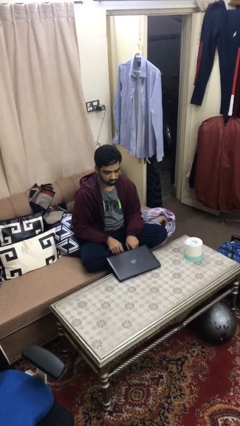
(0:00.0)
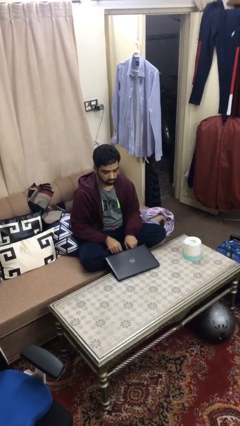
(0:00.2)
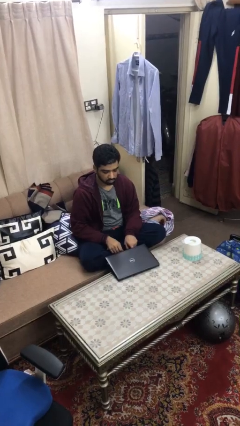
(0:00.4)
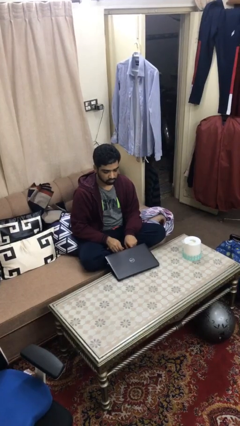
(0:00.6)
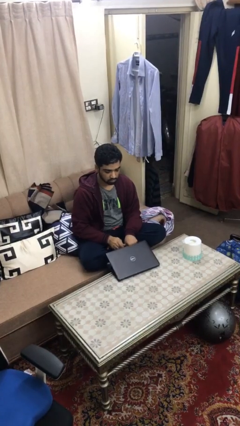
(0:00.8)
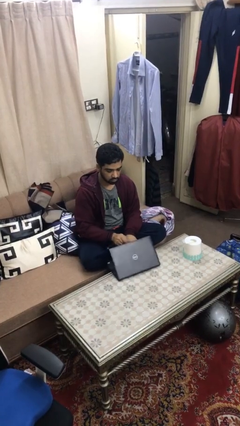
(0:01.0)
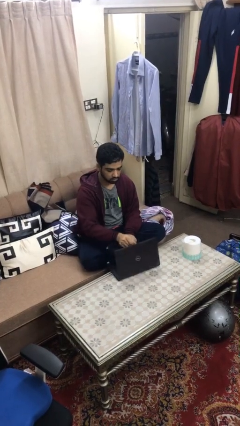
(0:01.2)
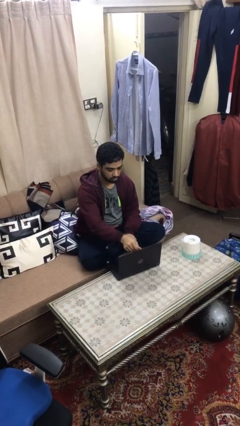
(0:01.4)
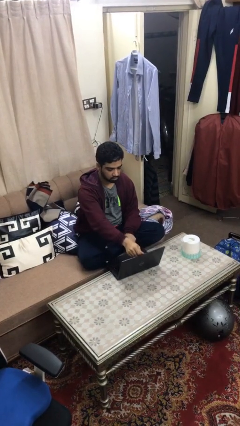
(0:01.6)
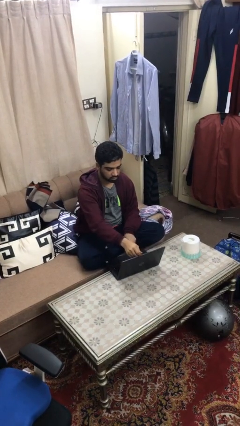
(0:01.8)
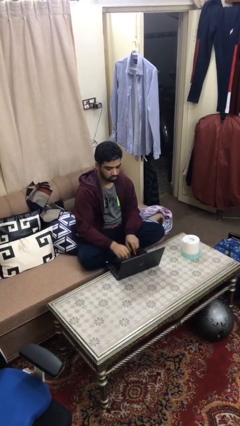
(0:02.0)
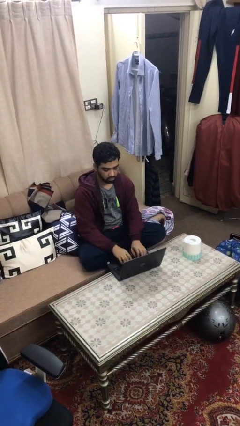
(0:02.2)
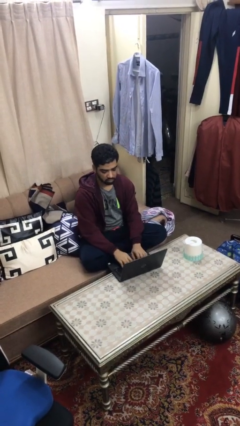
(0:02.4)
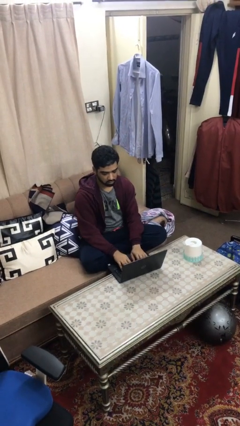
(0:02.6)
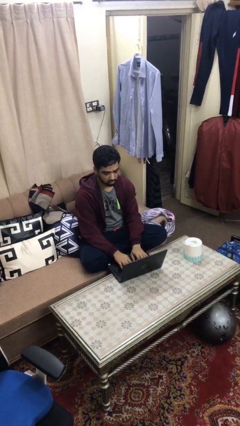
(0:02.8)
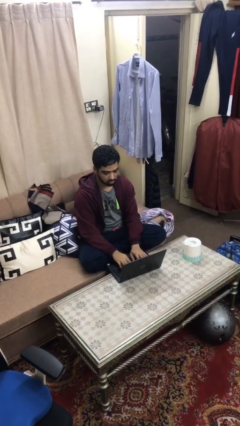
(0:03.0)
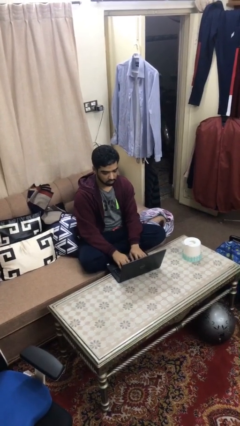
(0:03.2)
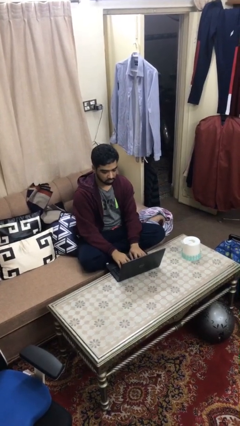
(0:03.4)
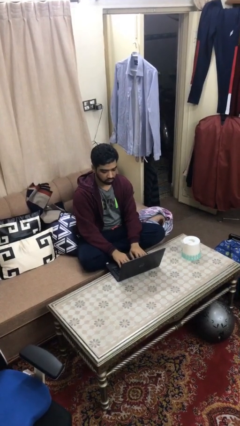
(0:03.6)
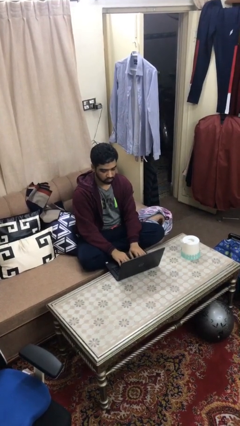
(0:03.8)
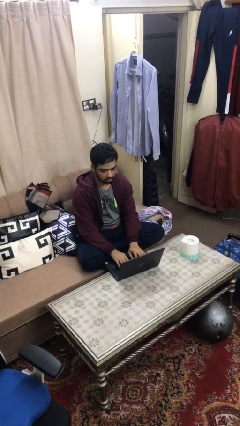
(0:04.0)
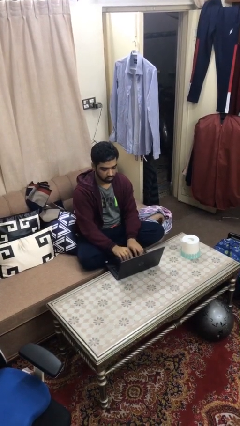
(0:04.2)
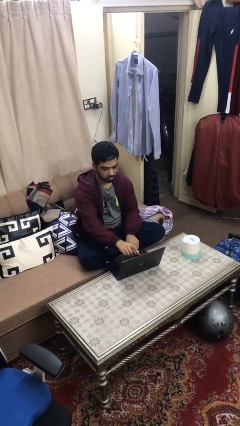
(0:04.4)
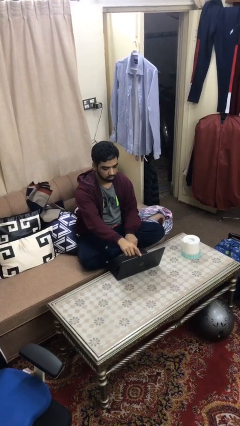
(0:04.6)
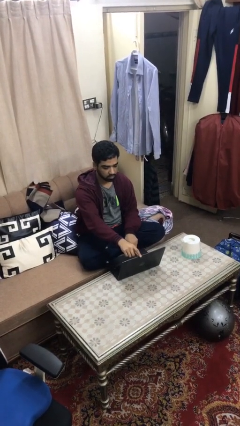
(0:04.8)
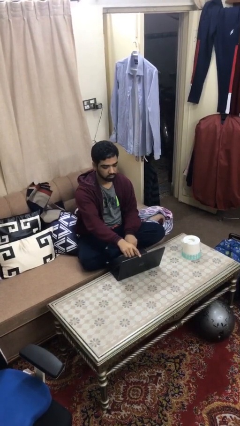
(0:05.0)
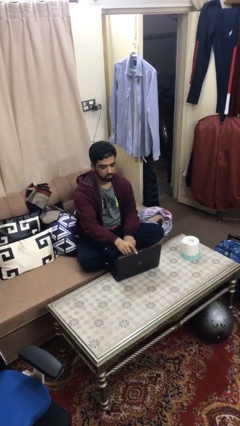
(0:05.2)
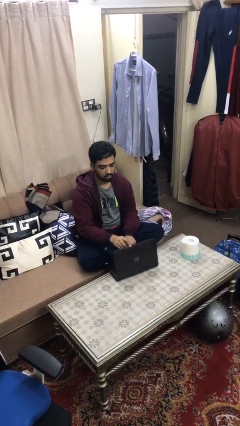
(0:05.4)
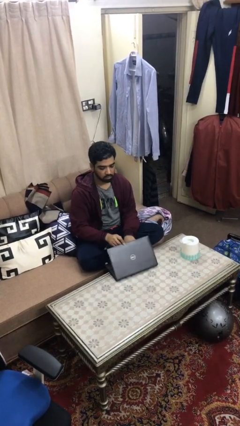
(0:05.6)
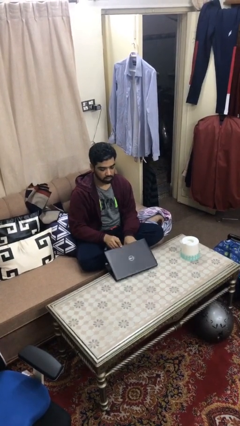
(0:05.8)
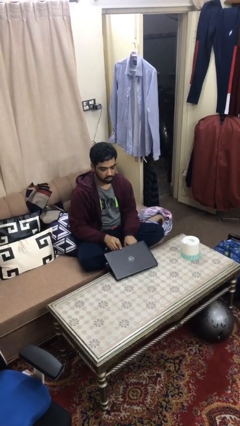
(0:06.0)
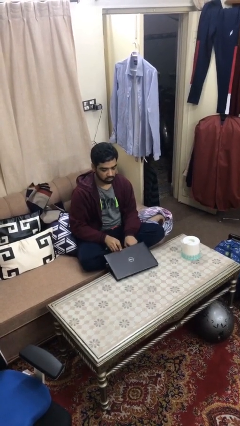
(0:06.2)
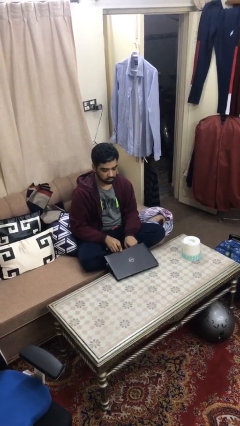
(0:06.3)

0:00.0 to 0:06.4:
person interacts with laptop

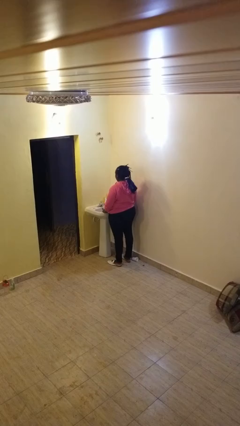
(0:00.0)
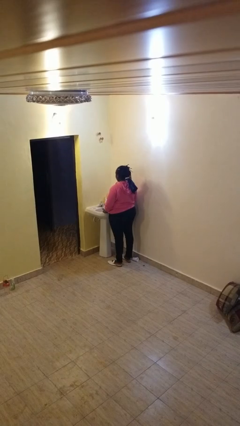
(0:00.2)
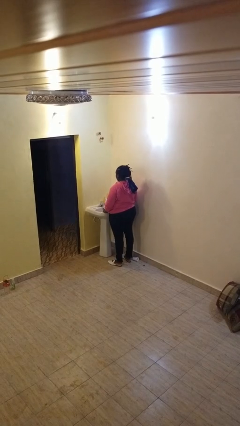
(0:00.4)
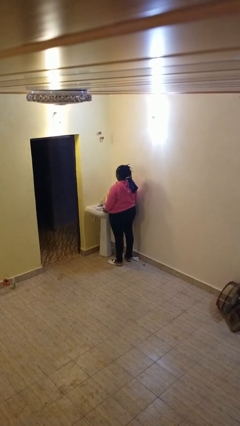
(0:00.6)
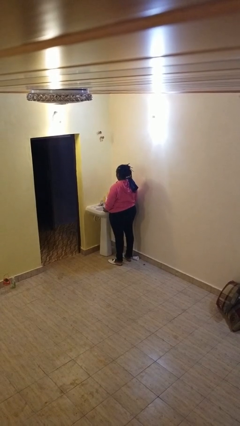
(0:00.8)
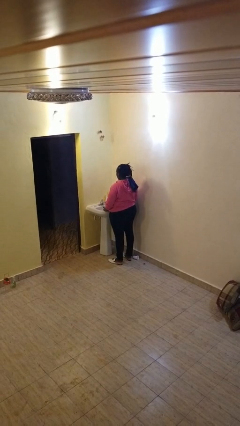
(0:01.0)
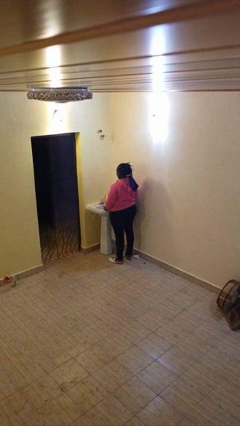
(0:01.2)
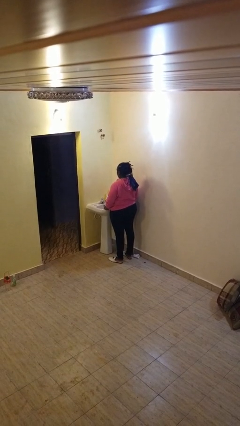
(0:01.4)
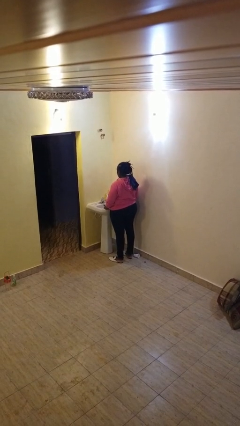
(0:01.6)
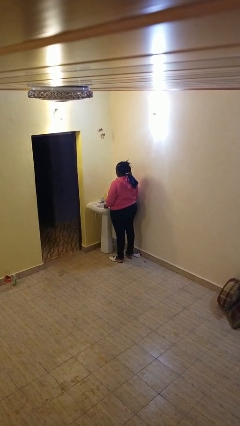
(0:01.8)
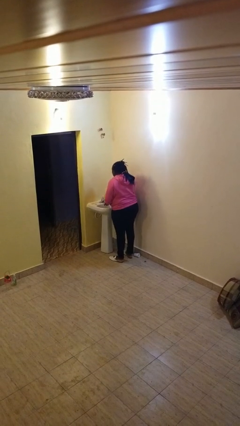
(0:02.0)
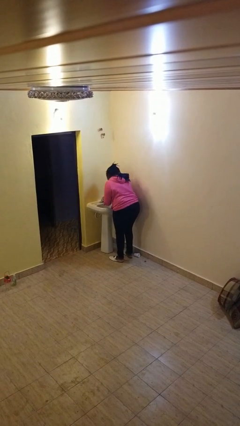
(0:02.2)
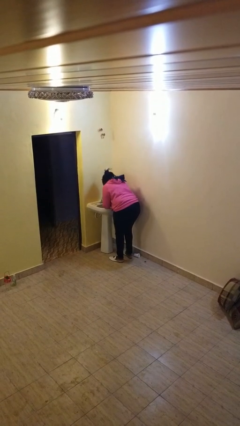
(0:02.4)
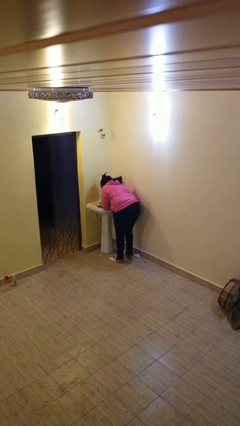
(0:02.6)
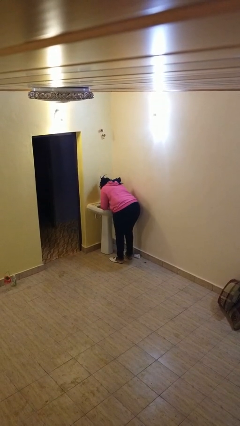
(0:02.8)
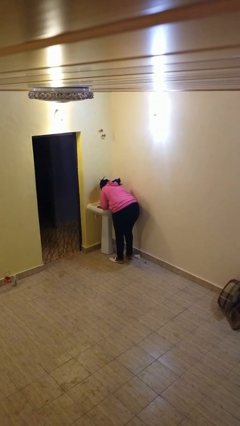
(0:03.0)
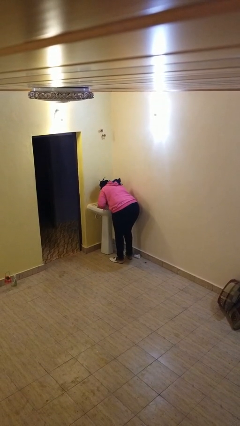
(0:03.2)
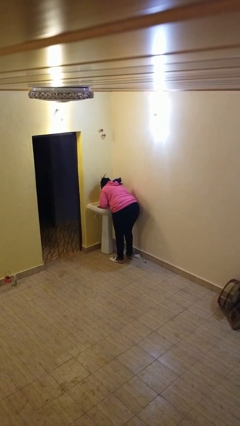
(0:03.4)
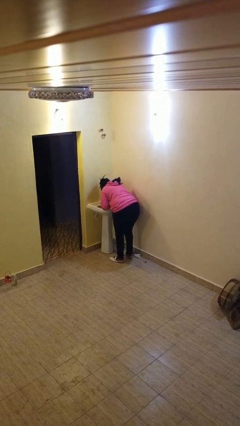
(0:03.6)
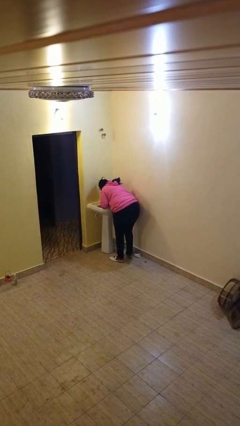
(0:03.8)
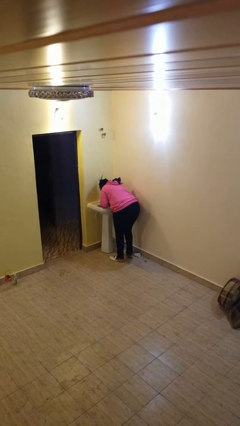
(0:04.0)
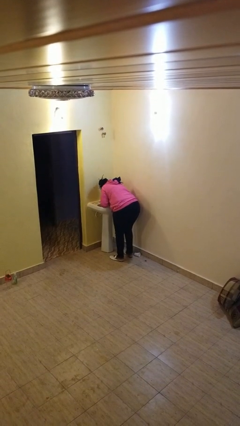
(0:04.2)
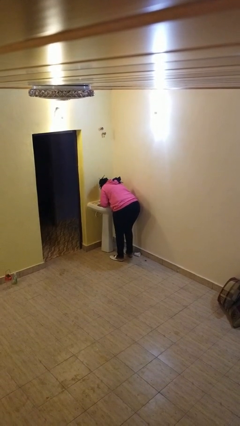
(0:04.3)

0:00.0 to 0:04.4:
person washes face

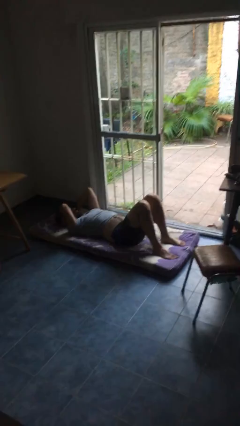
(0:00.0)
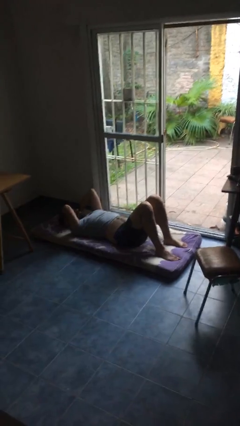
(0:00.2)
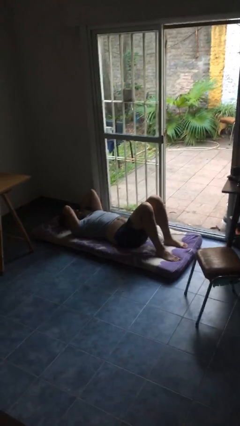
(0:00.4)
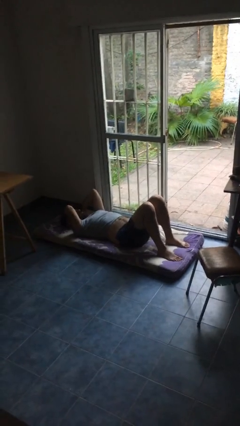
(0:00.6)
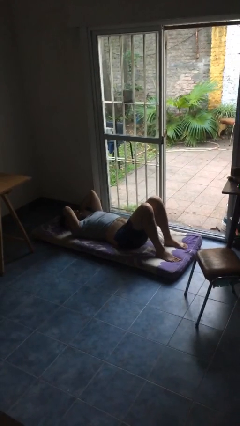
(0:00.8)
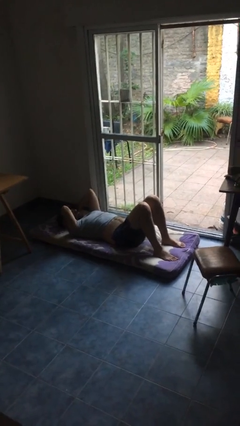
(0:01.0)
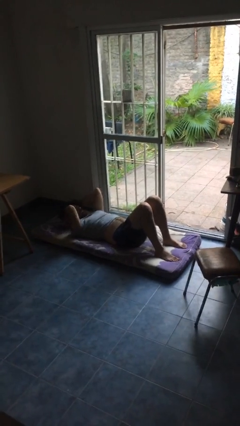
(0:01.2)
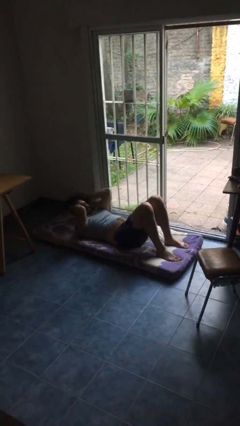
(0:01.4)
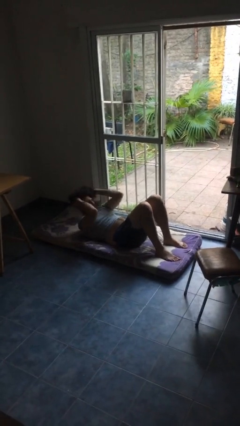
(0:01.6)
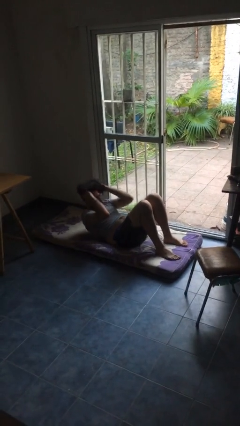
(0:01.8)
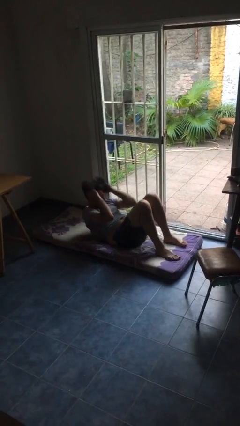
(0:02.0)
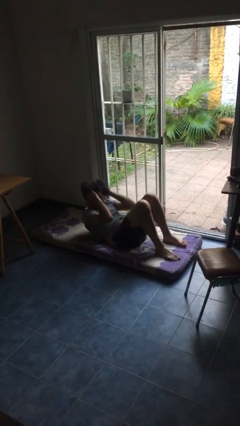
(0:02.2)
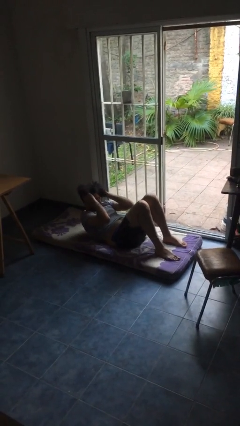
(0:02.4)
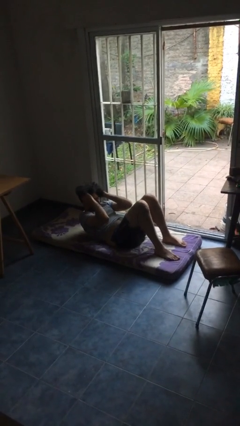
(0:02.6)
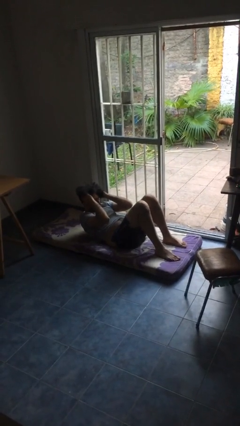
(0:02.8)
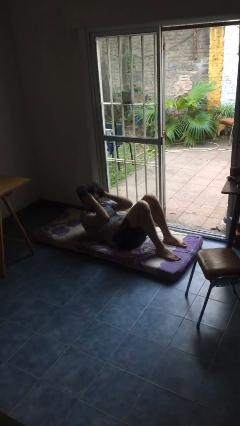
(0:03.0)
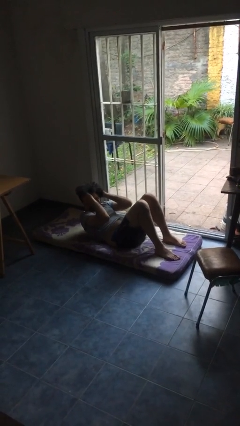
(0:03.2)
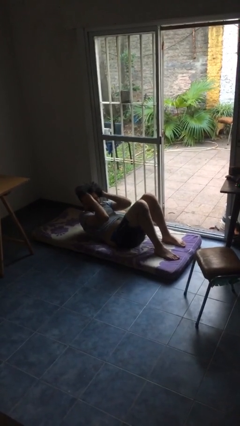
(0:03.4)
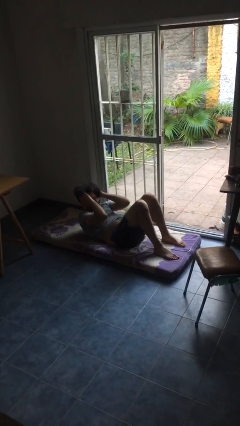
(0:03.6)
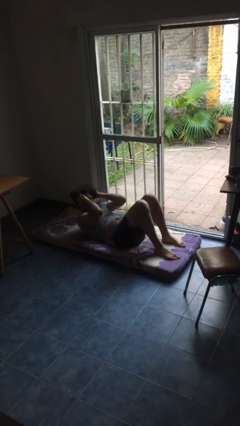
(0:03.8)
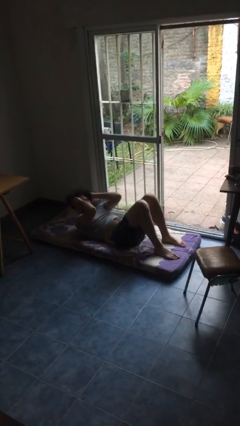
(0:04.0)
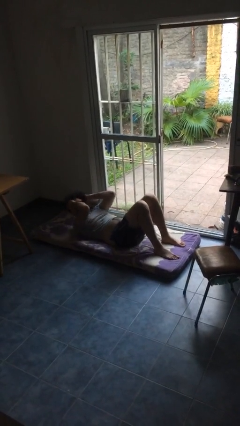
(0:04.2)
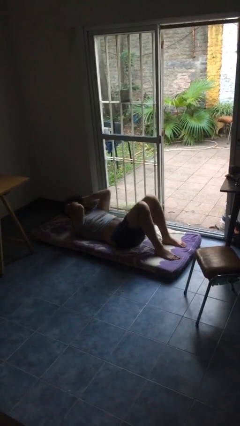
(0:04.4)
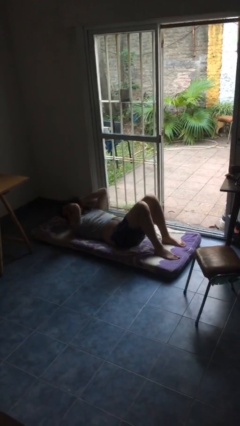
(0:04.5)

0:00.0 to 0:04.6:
person exercises with situp

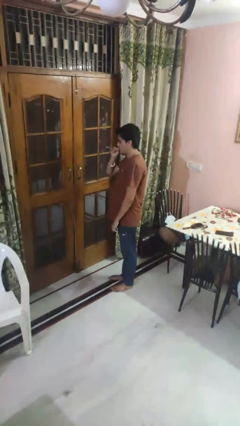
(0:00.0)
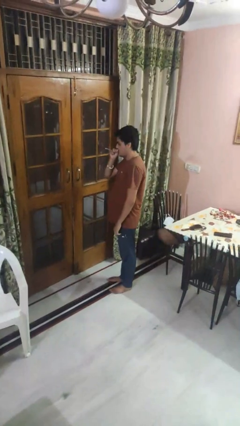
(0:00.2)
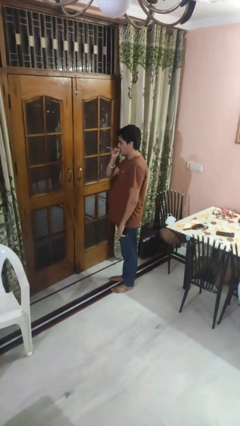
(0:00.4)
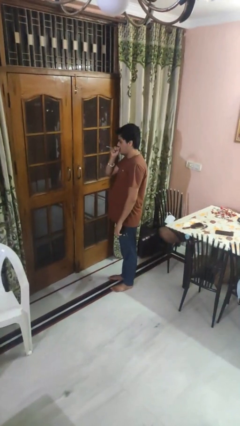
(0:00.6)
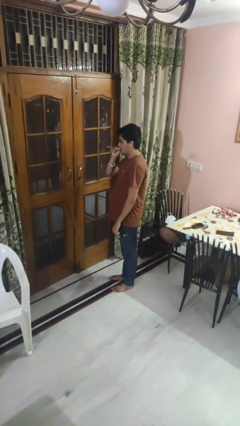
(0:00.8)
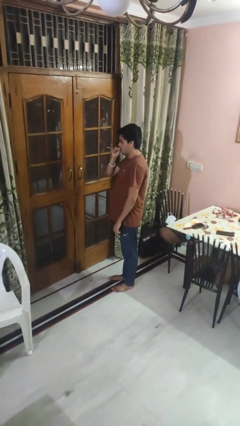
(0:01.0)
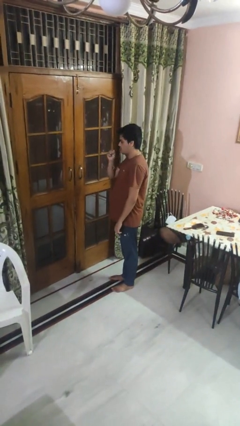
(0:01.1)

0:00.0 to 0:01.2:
person vapes

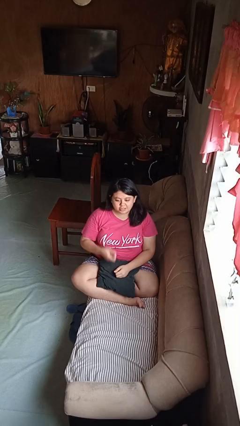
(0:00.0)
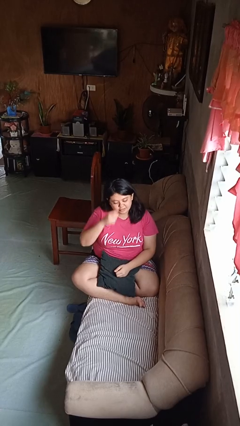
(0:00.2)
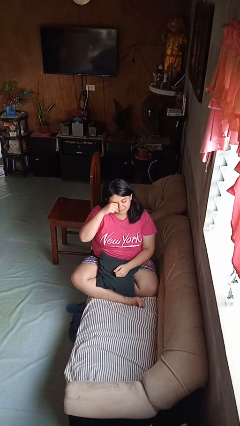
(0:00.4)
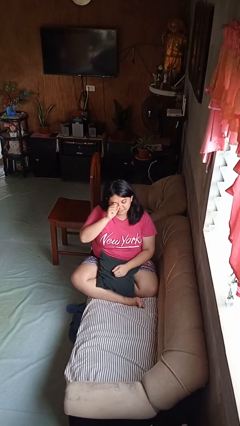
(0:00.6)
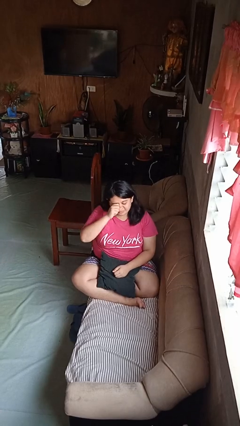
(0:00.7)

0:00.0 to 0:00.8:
person rubs eyes
